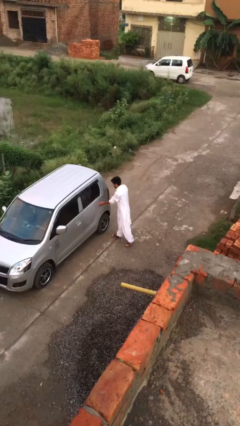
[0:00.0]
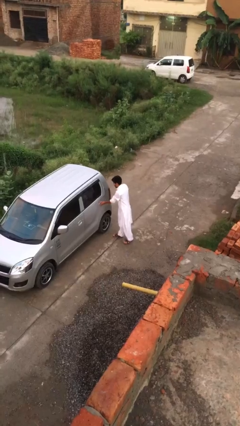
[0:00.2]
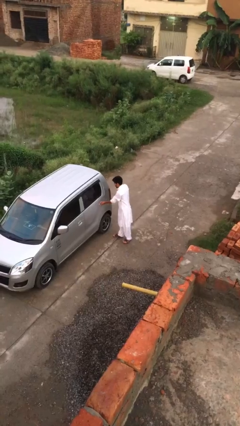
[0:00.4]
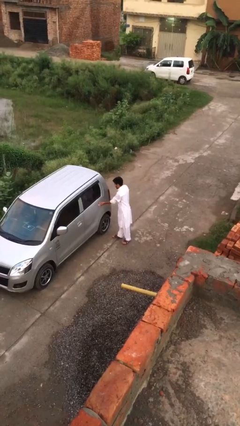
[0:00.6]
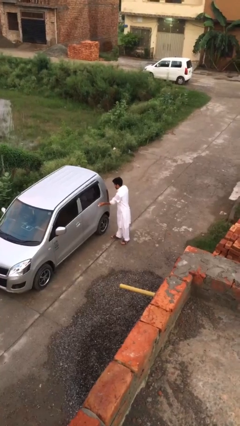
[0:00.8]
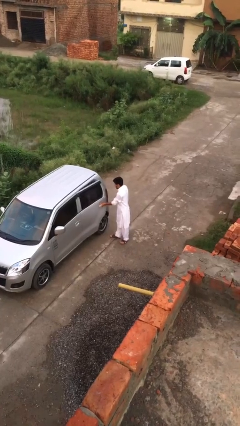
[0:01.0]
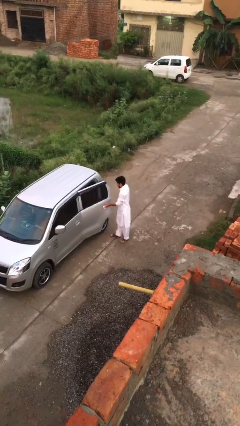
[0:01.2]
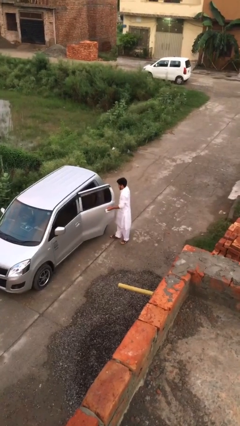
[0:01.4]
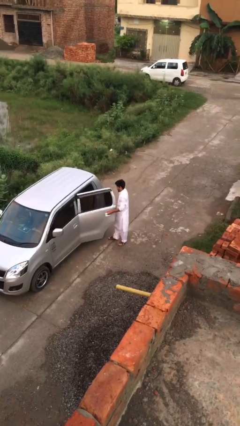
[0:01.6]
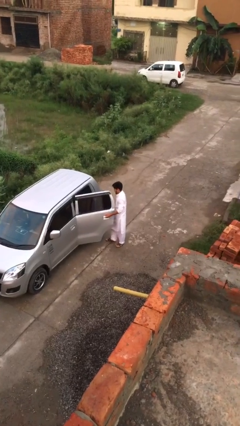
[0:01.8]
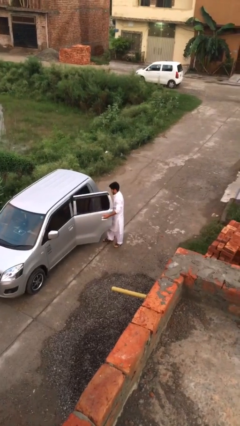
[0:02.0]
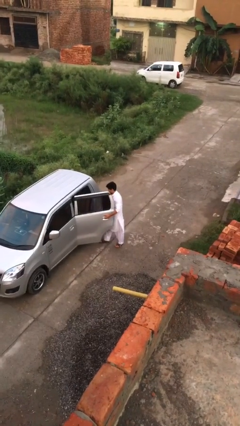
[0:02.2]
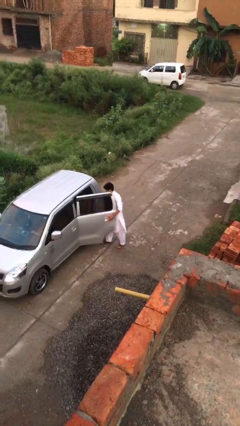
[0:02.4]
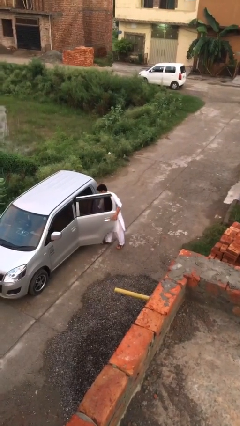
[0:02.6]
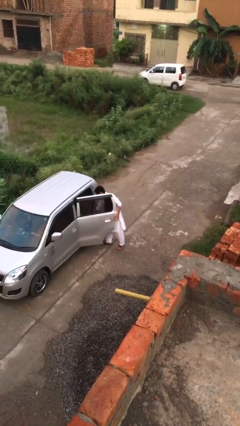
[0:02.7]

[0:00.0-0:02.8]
person opens car door

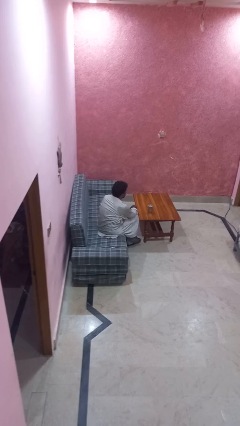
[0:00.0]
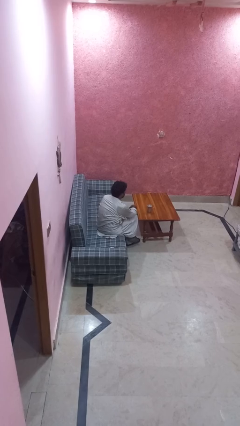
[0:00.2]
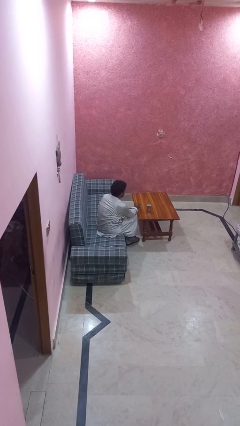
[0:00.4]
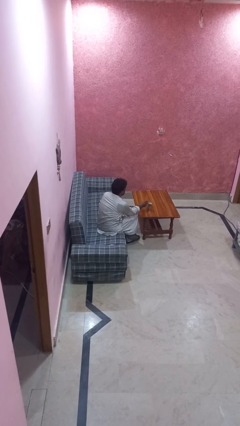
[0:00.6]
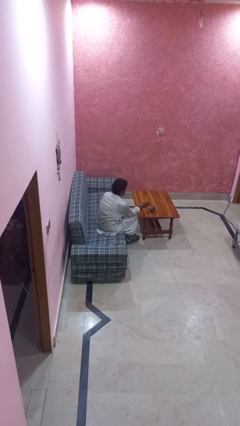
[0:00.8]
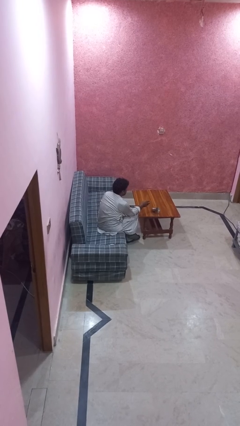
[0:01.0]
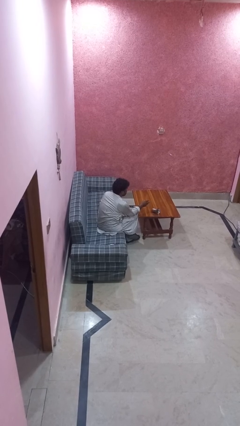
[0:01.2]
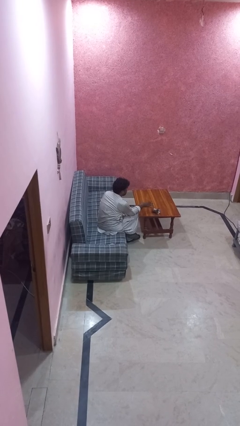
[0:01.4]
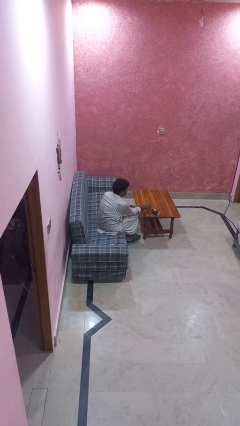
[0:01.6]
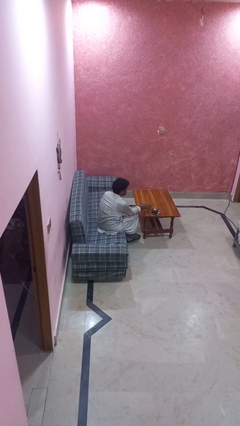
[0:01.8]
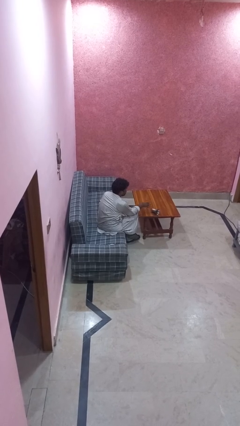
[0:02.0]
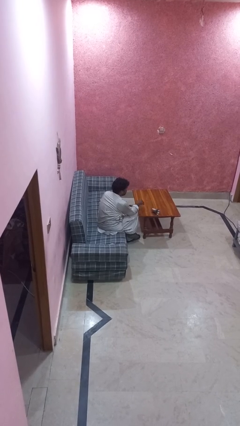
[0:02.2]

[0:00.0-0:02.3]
person knocks over glass

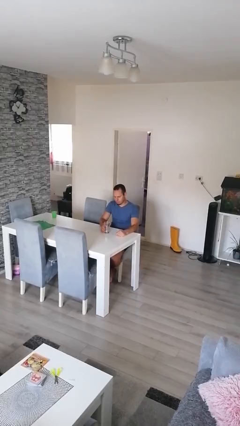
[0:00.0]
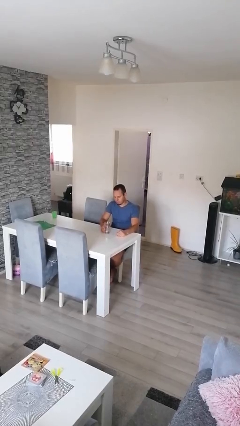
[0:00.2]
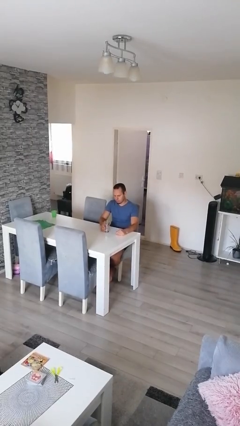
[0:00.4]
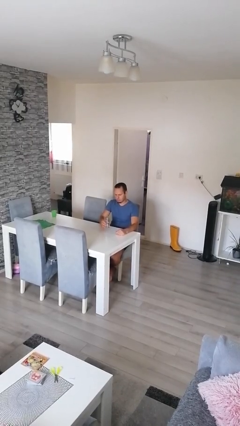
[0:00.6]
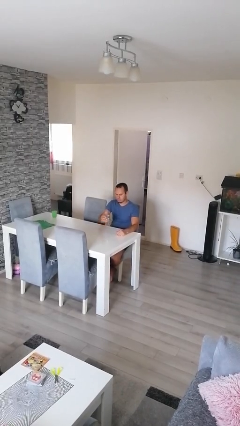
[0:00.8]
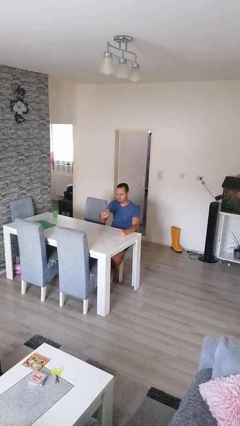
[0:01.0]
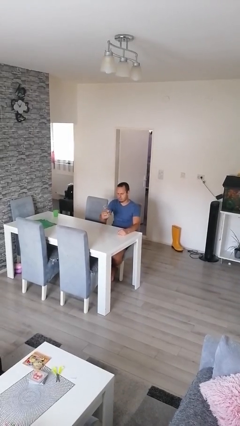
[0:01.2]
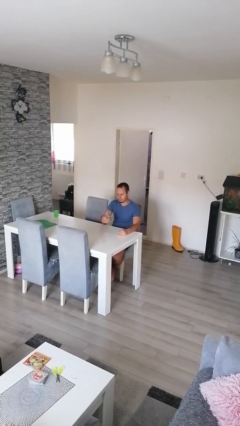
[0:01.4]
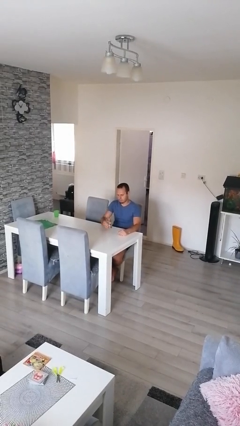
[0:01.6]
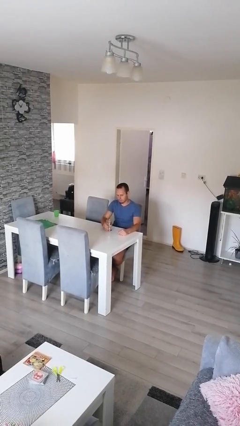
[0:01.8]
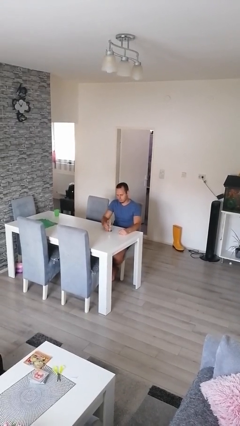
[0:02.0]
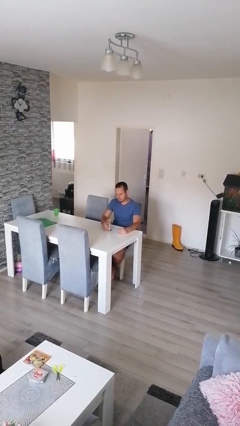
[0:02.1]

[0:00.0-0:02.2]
person sets upright glass

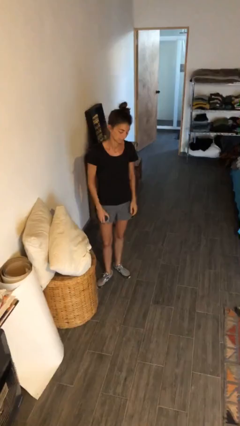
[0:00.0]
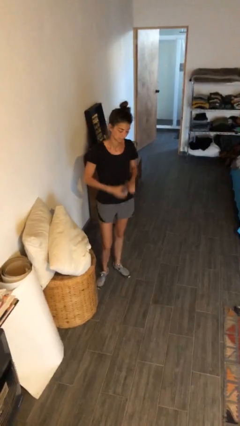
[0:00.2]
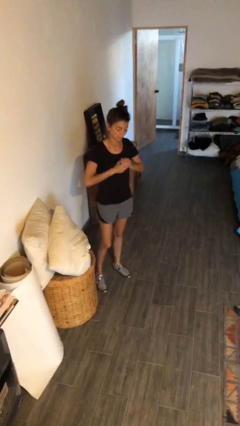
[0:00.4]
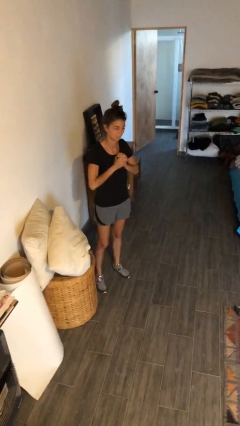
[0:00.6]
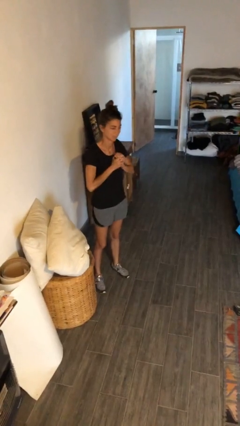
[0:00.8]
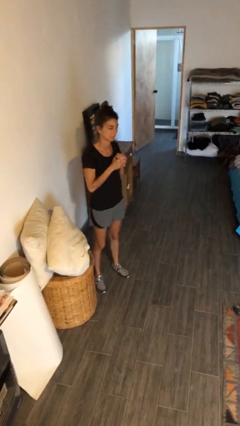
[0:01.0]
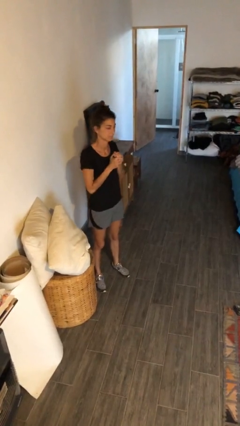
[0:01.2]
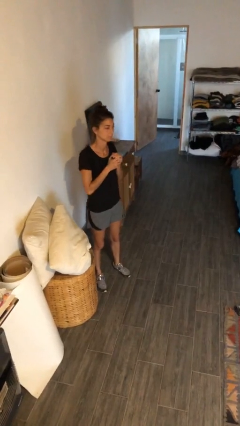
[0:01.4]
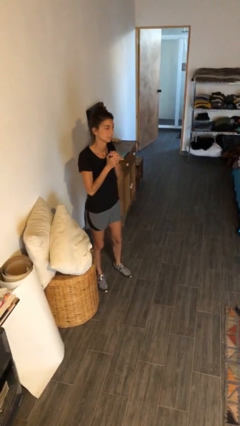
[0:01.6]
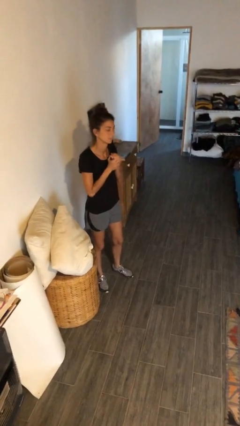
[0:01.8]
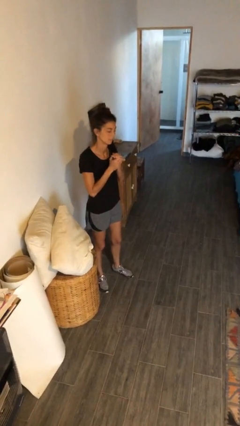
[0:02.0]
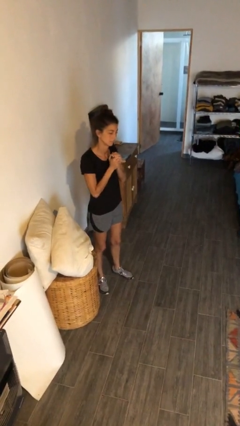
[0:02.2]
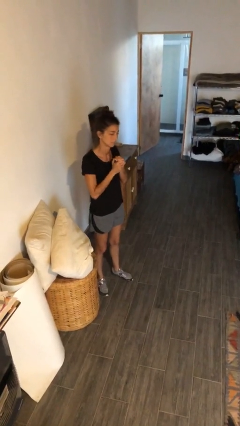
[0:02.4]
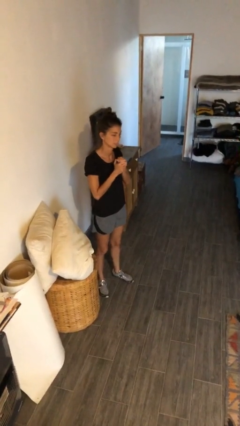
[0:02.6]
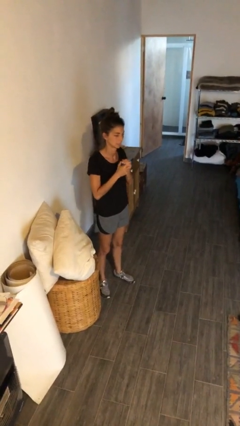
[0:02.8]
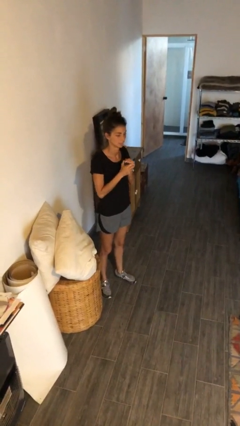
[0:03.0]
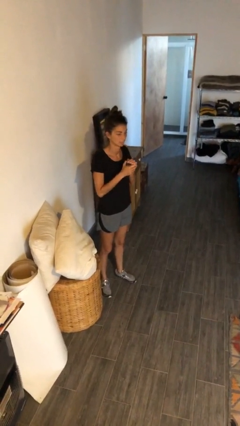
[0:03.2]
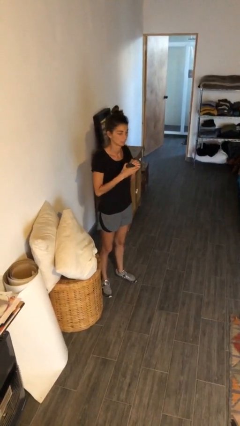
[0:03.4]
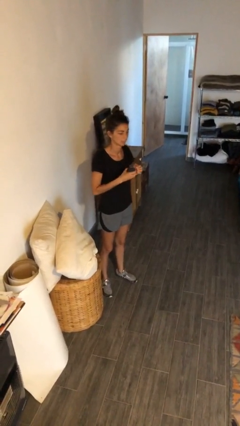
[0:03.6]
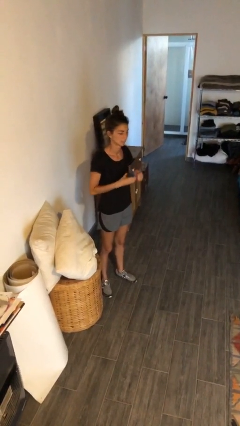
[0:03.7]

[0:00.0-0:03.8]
person squeezes object

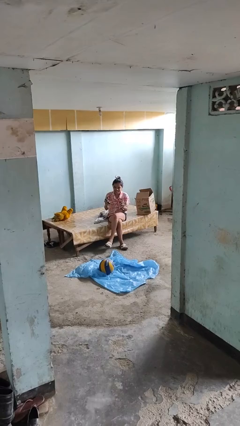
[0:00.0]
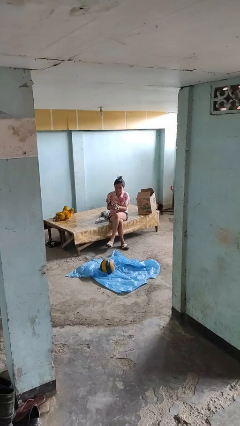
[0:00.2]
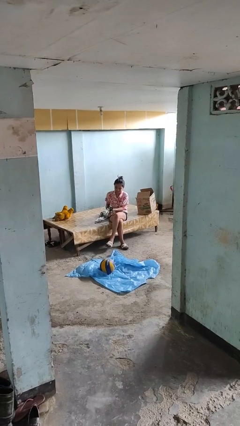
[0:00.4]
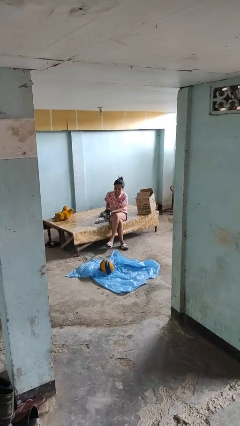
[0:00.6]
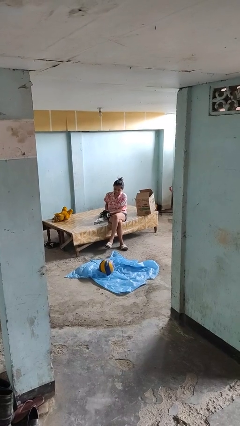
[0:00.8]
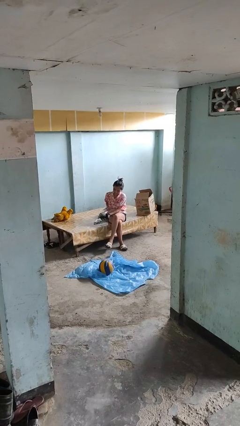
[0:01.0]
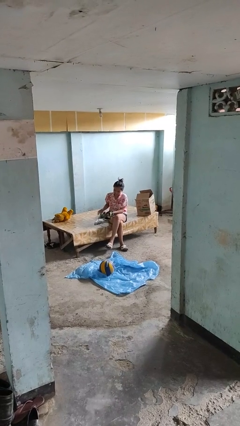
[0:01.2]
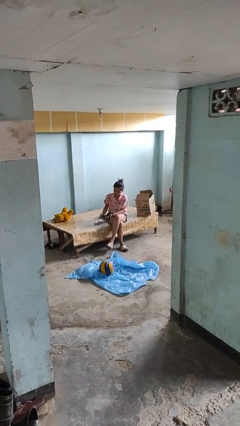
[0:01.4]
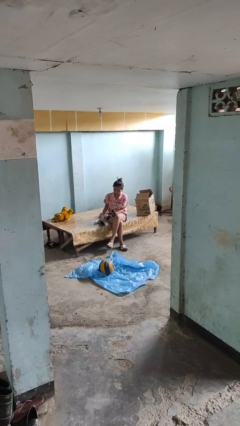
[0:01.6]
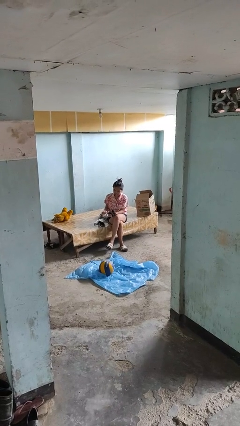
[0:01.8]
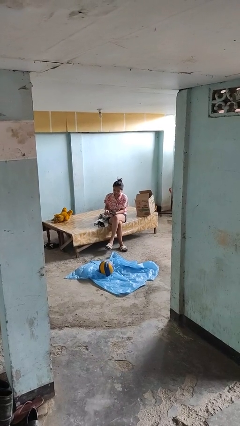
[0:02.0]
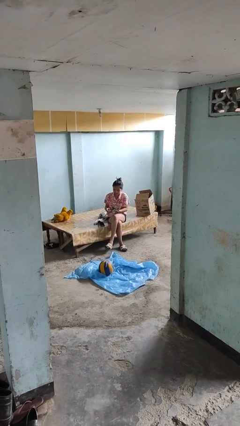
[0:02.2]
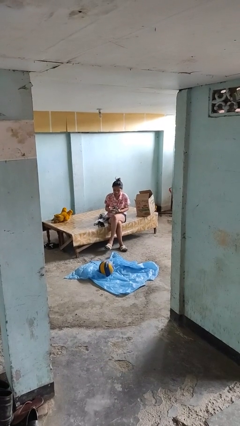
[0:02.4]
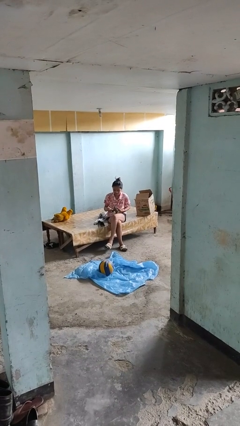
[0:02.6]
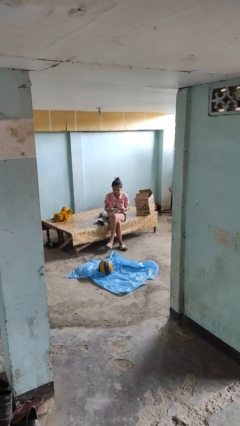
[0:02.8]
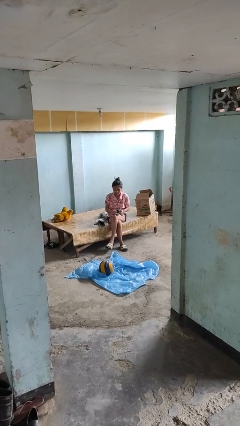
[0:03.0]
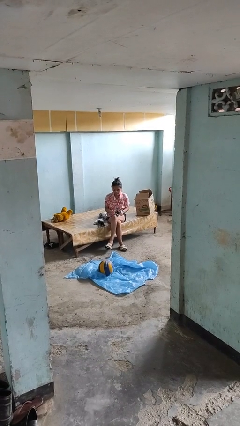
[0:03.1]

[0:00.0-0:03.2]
person takes off gloves

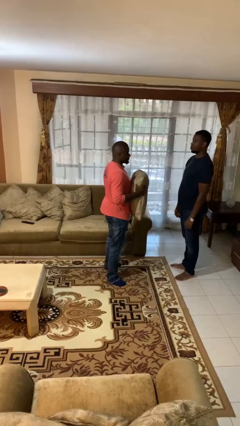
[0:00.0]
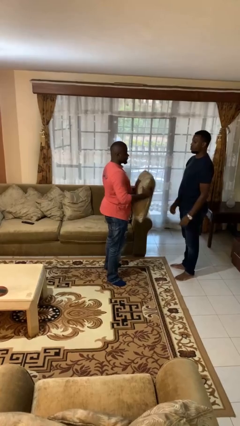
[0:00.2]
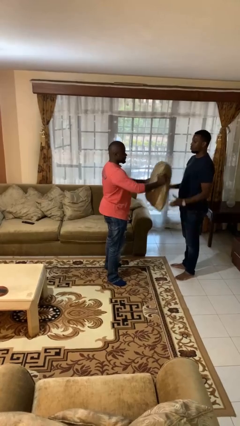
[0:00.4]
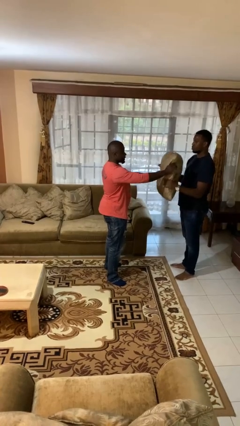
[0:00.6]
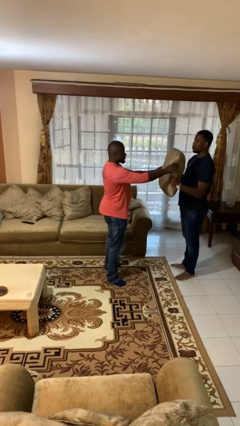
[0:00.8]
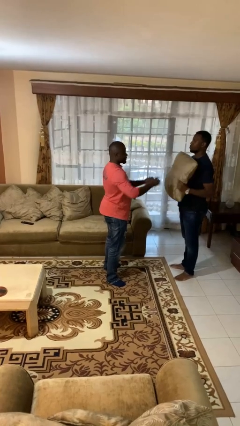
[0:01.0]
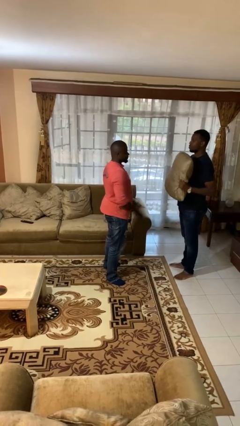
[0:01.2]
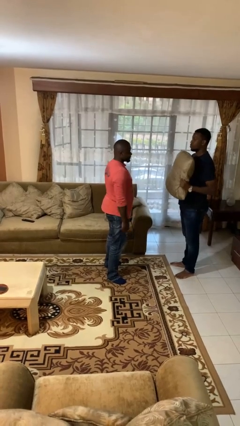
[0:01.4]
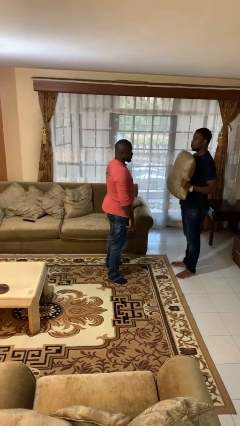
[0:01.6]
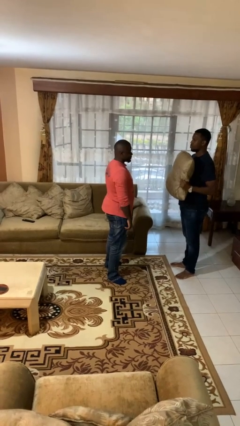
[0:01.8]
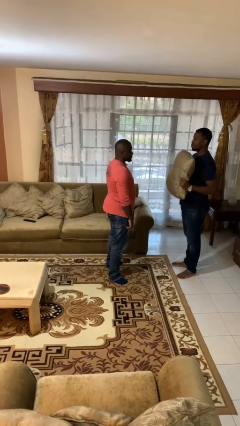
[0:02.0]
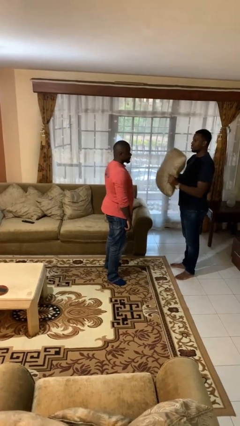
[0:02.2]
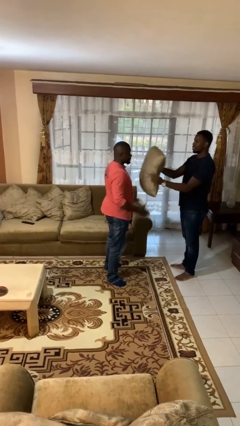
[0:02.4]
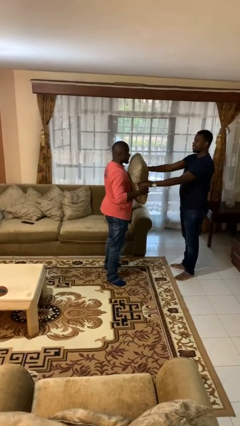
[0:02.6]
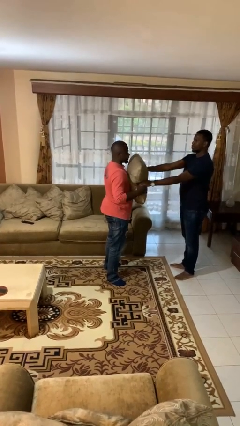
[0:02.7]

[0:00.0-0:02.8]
person transfers object to person
